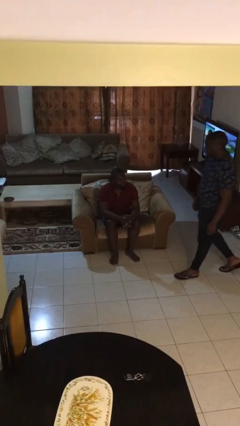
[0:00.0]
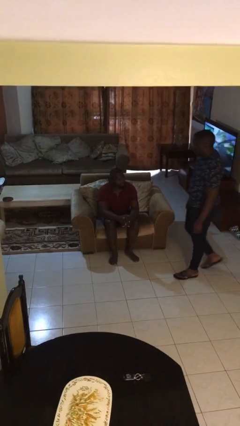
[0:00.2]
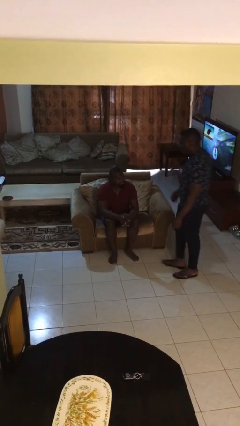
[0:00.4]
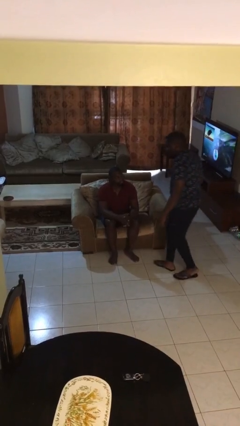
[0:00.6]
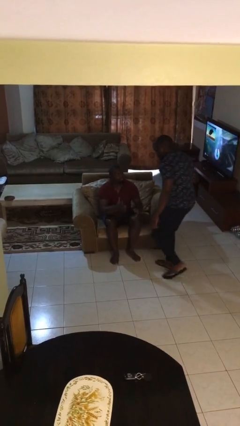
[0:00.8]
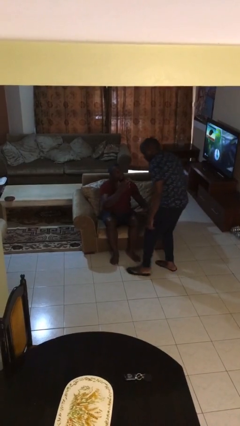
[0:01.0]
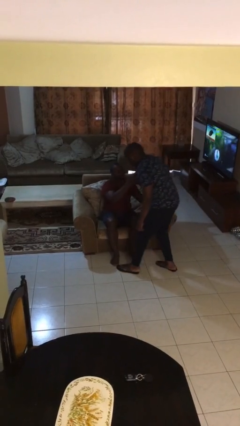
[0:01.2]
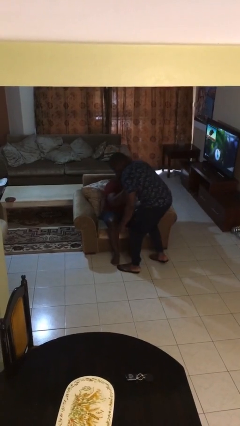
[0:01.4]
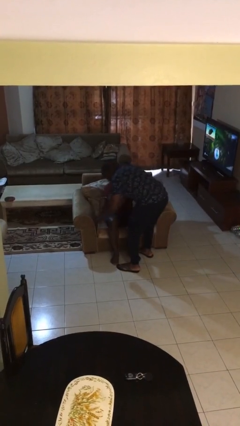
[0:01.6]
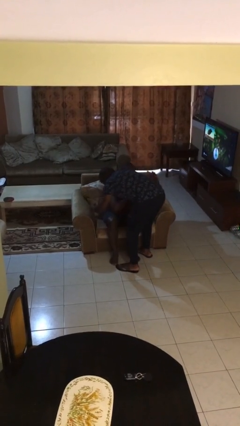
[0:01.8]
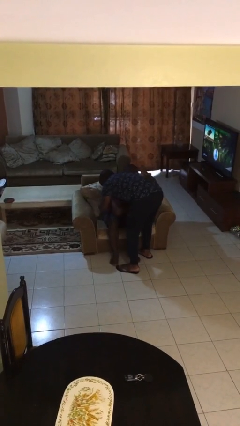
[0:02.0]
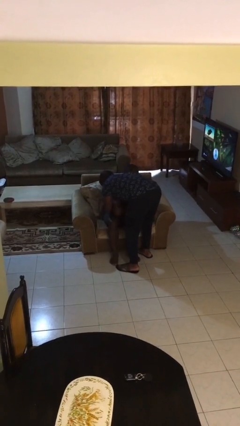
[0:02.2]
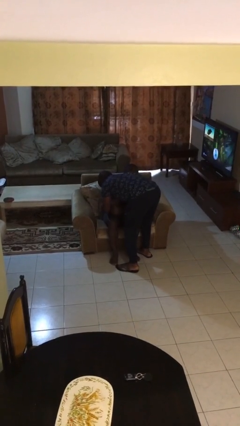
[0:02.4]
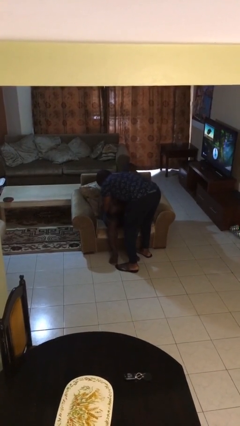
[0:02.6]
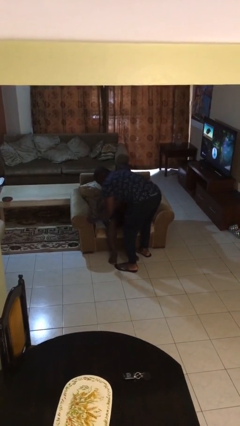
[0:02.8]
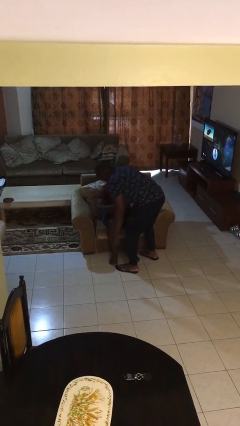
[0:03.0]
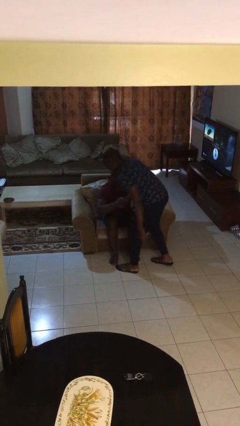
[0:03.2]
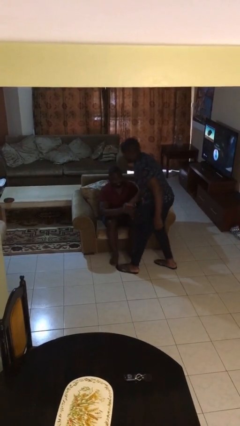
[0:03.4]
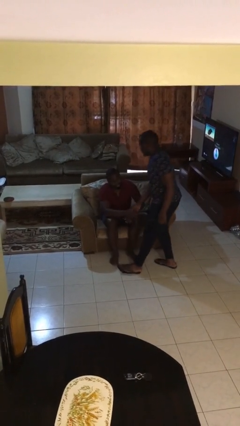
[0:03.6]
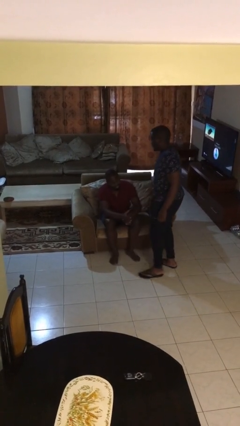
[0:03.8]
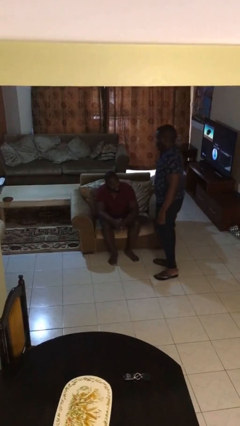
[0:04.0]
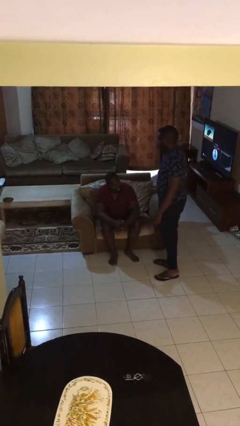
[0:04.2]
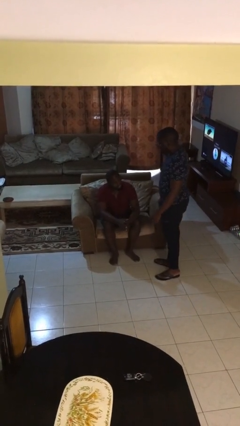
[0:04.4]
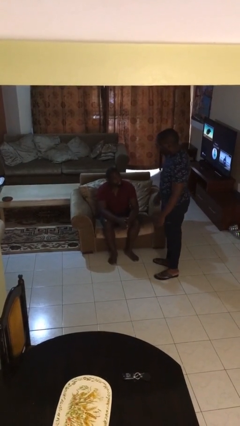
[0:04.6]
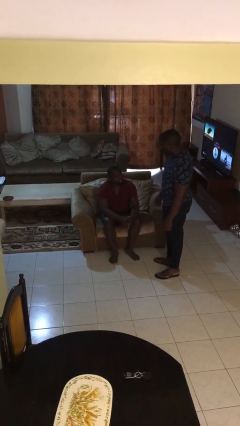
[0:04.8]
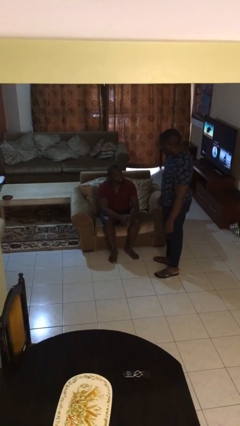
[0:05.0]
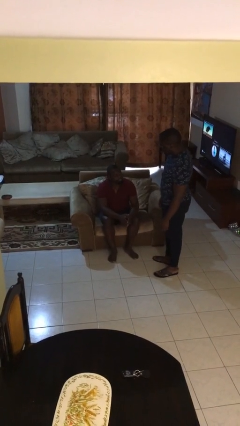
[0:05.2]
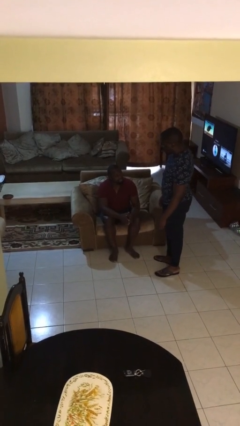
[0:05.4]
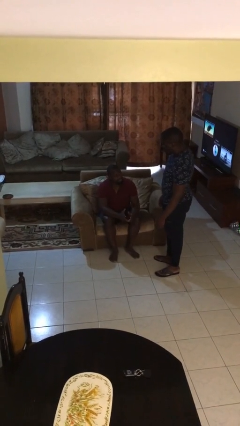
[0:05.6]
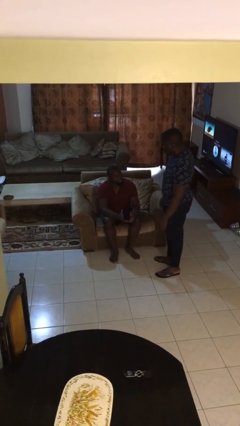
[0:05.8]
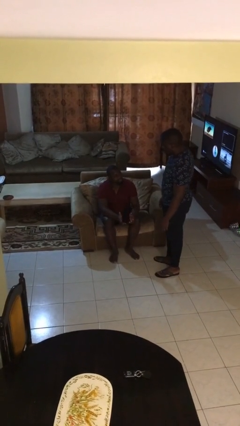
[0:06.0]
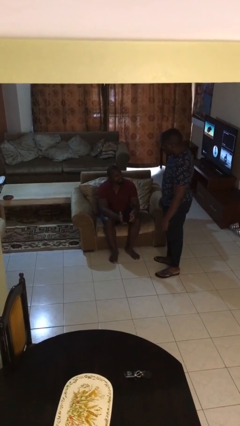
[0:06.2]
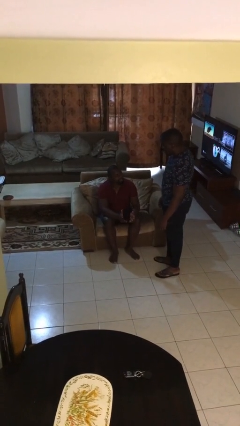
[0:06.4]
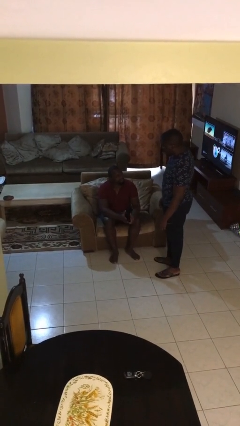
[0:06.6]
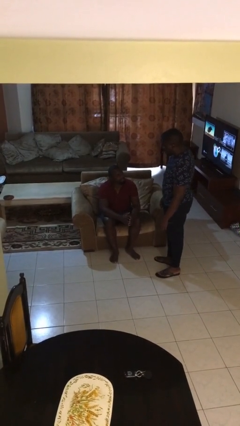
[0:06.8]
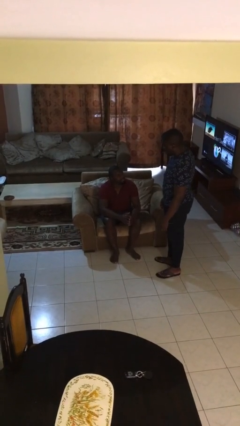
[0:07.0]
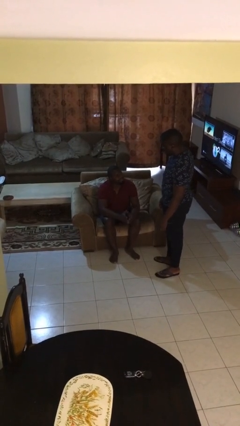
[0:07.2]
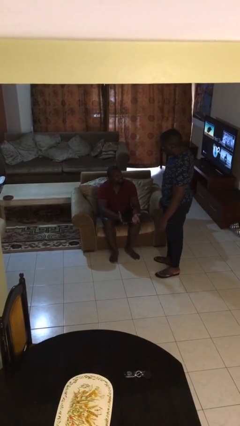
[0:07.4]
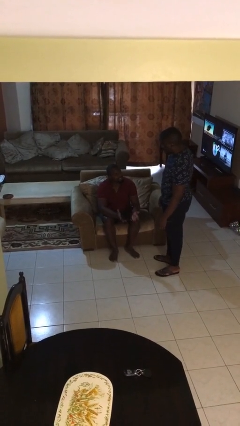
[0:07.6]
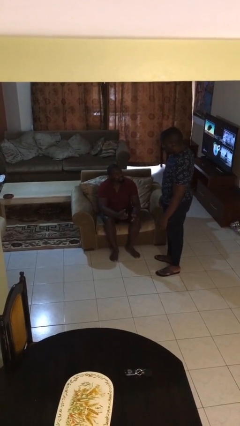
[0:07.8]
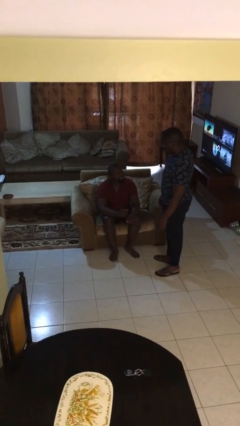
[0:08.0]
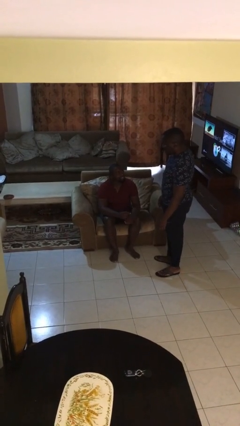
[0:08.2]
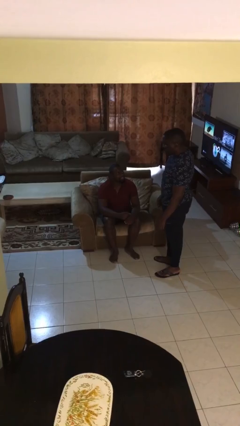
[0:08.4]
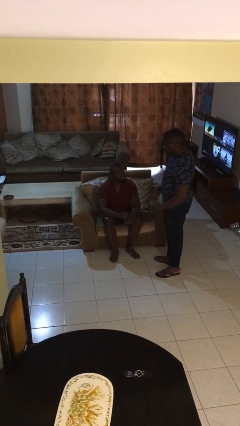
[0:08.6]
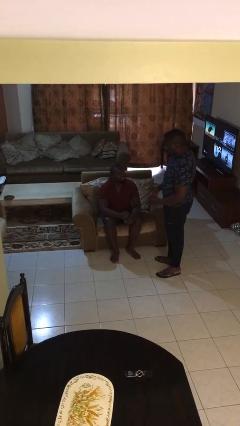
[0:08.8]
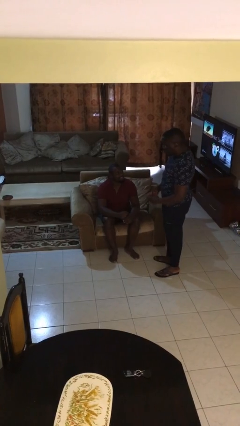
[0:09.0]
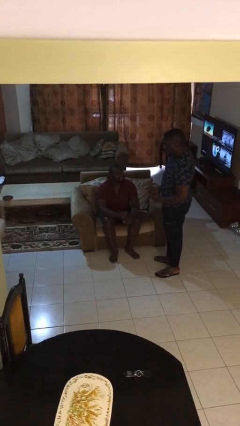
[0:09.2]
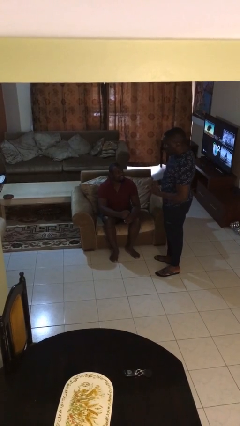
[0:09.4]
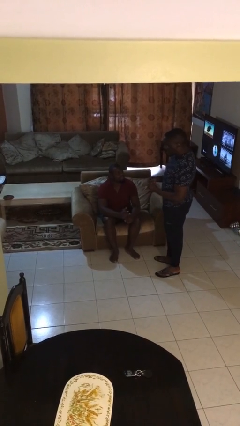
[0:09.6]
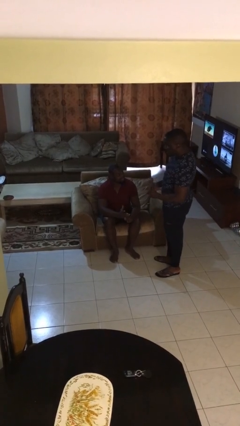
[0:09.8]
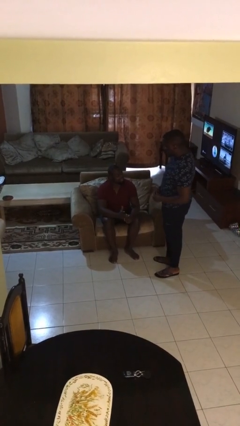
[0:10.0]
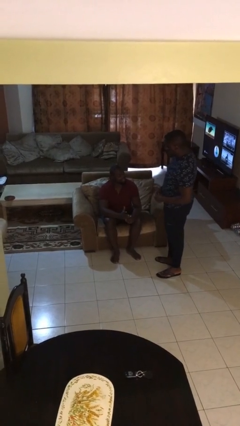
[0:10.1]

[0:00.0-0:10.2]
person embraces person

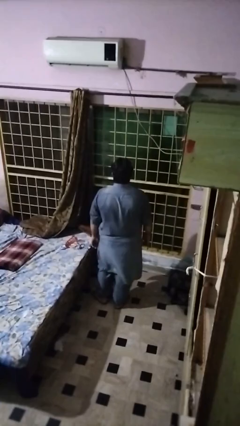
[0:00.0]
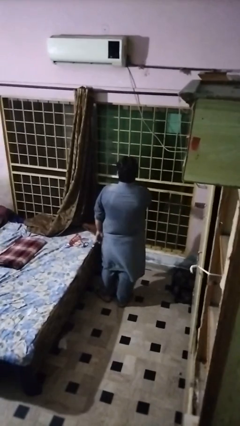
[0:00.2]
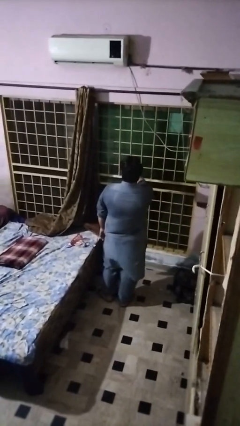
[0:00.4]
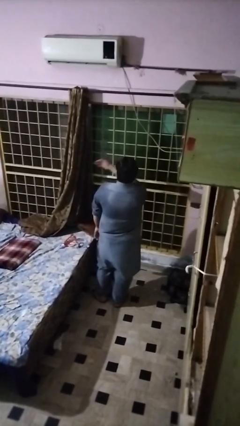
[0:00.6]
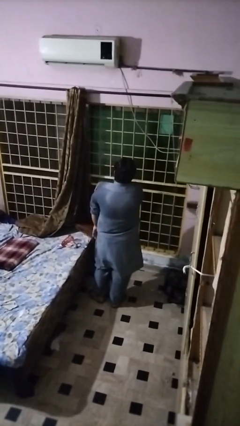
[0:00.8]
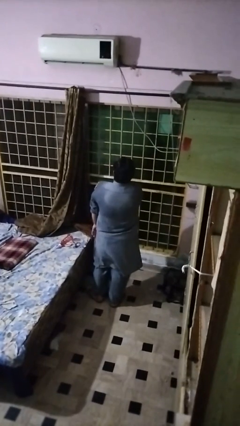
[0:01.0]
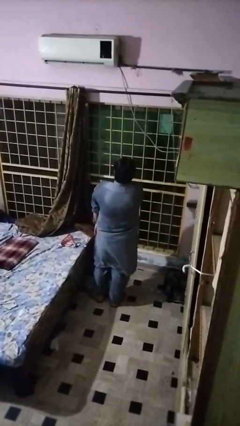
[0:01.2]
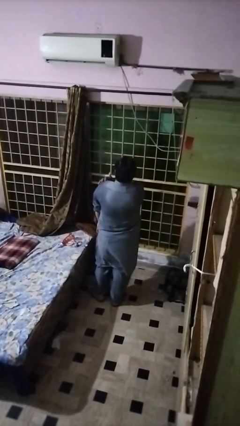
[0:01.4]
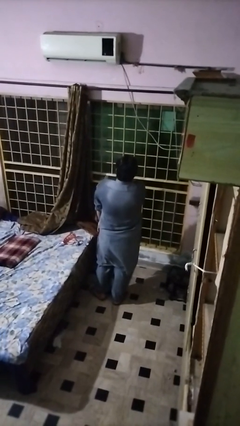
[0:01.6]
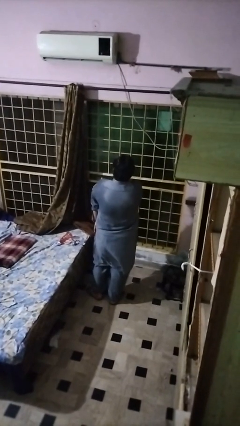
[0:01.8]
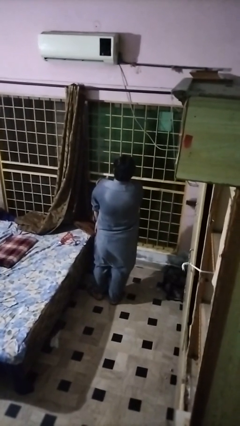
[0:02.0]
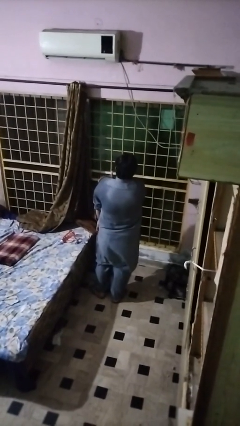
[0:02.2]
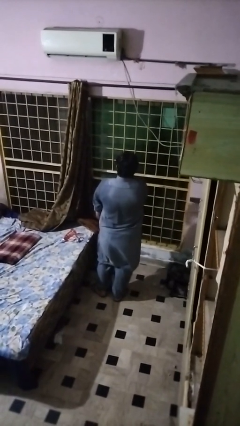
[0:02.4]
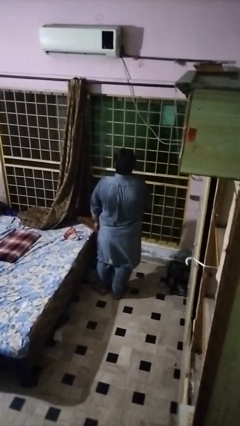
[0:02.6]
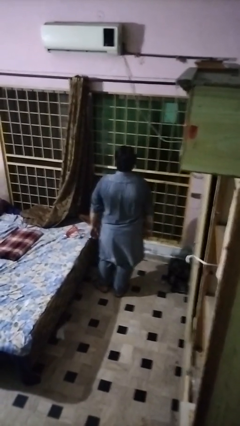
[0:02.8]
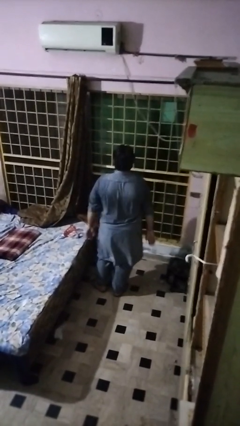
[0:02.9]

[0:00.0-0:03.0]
person swats bug

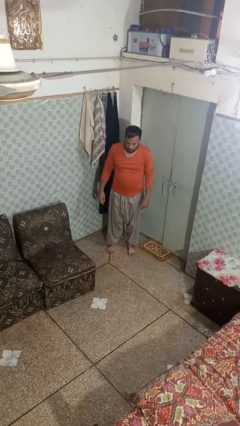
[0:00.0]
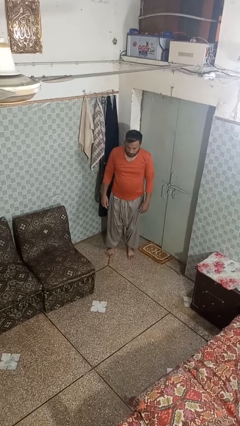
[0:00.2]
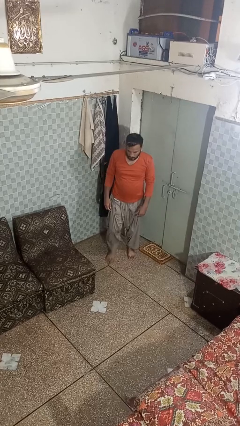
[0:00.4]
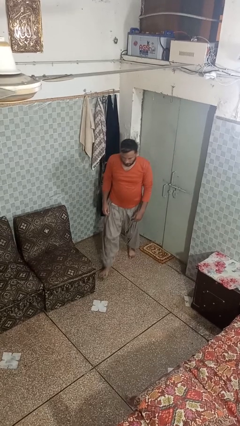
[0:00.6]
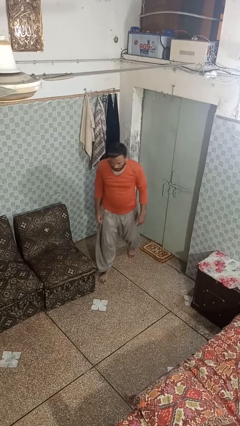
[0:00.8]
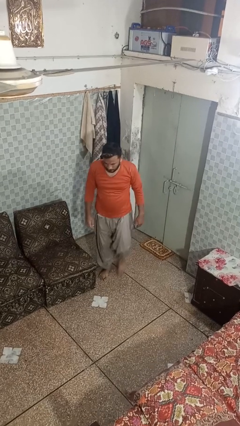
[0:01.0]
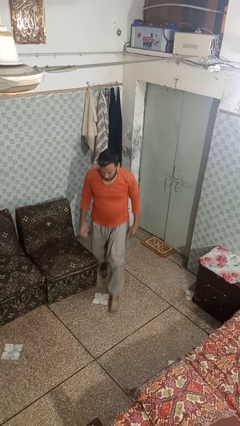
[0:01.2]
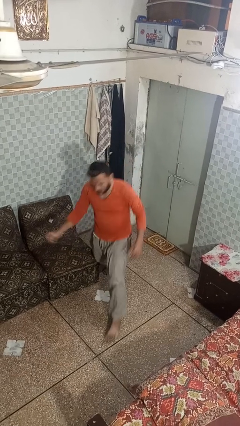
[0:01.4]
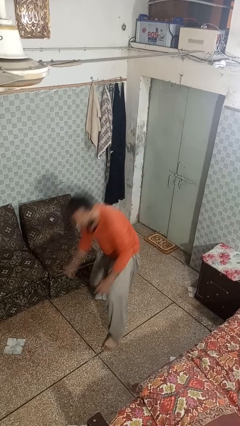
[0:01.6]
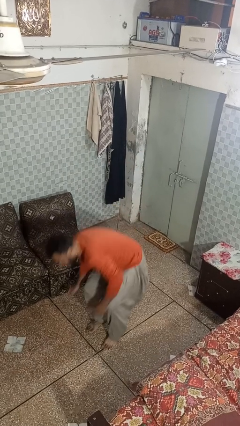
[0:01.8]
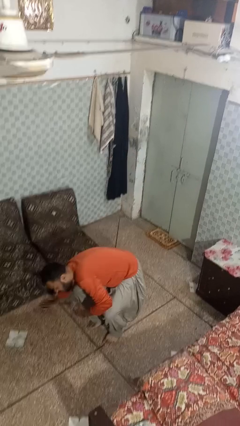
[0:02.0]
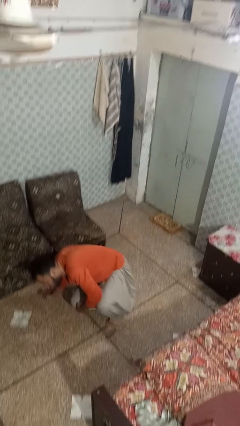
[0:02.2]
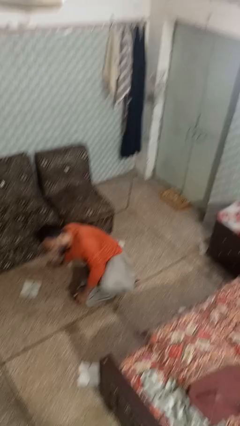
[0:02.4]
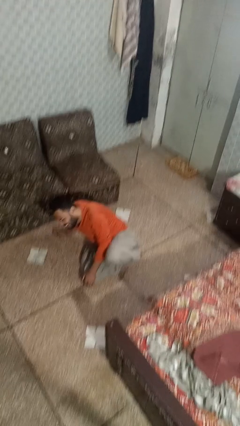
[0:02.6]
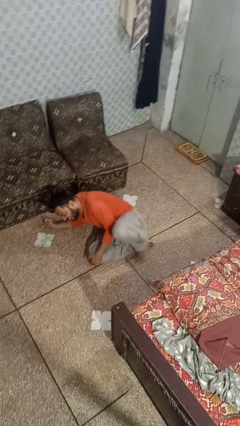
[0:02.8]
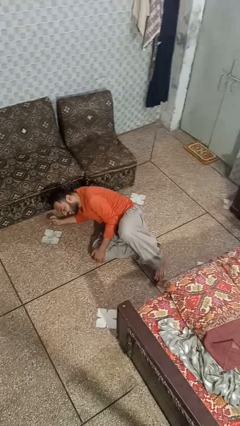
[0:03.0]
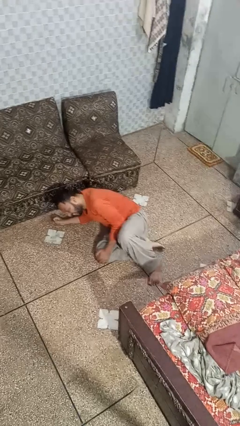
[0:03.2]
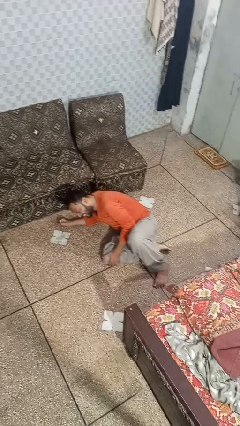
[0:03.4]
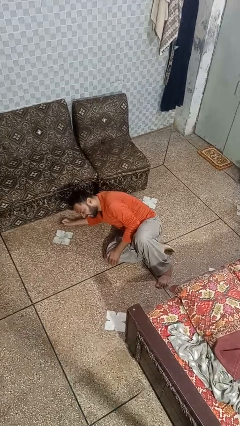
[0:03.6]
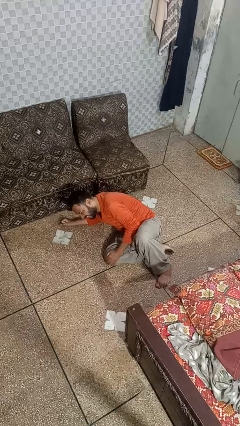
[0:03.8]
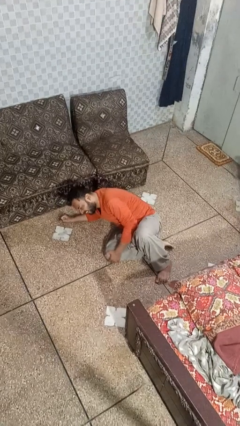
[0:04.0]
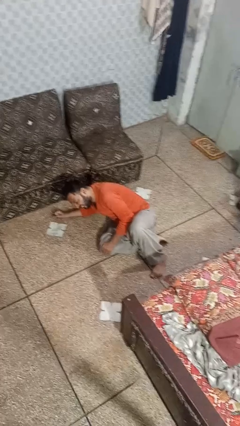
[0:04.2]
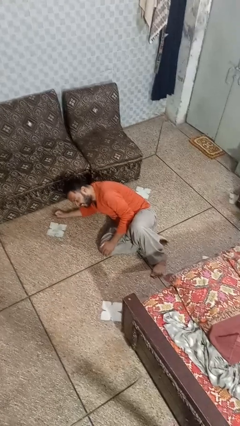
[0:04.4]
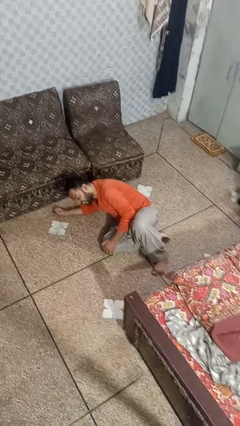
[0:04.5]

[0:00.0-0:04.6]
person trips on object on floor
